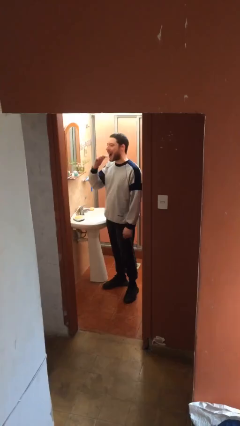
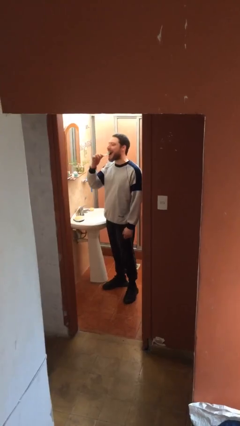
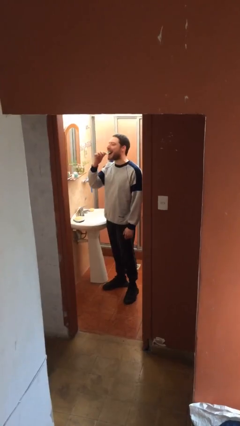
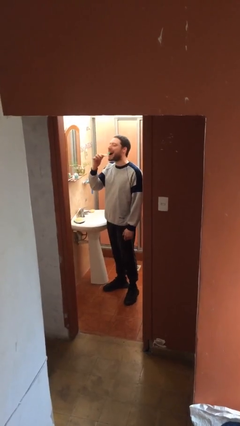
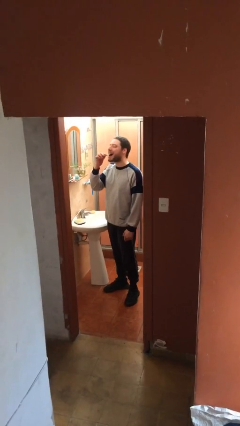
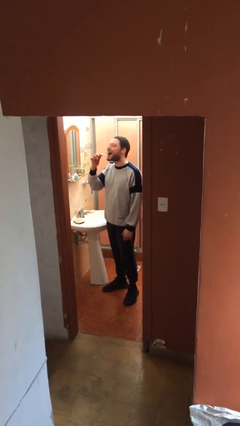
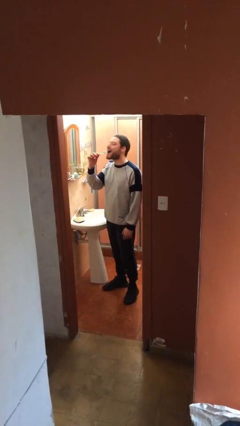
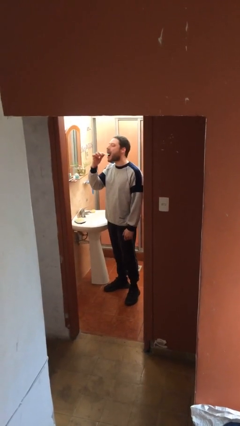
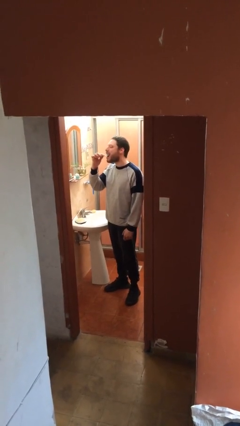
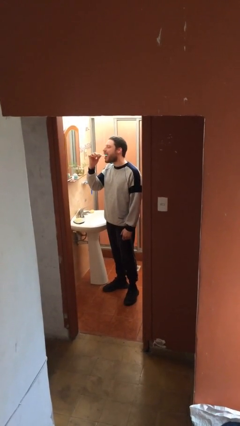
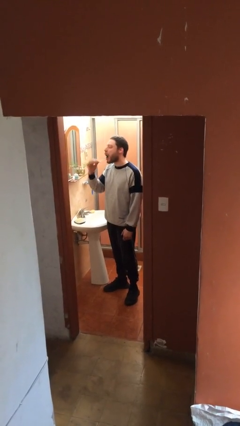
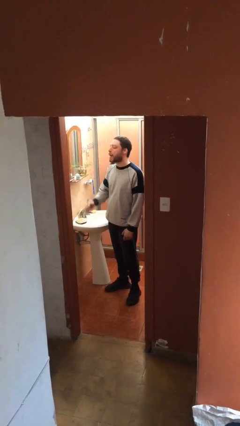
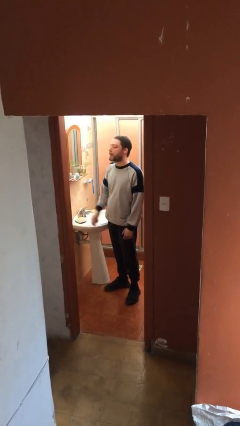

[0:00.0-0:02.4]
person brushes teeth

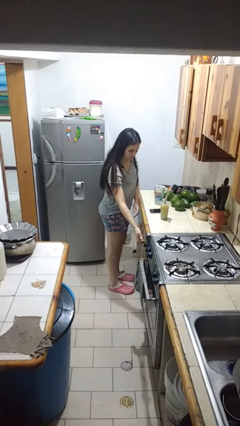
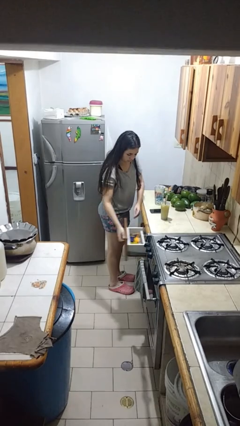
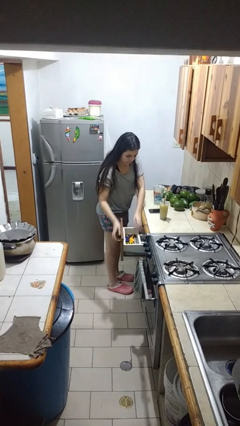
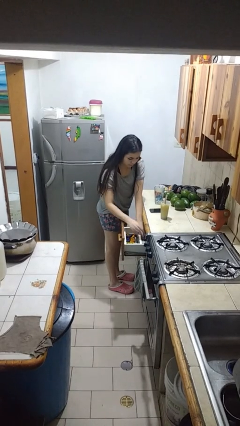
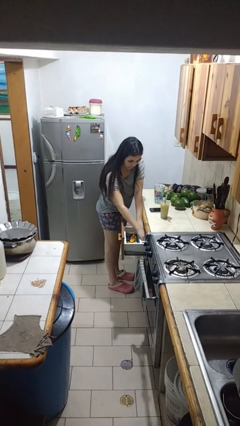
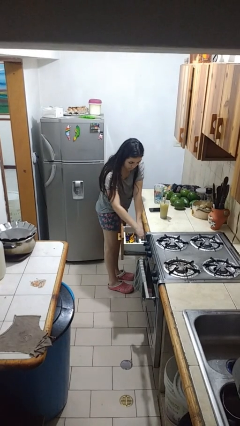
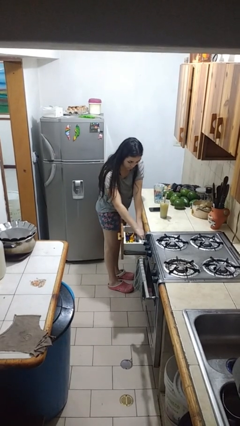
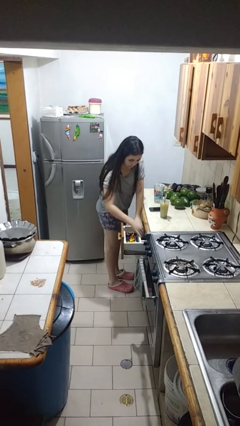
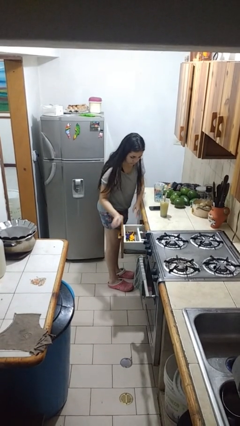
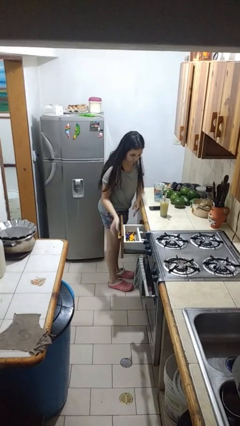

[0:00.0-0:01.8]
person searches in kitchen drawer

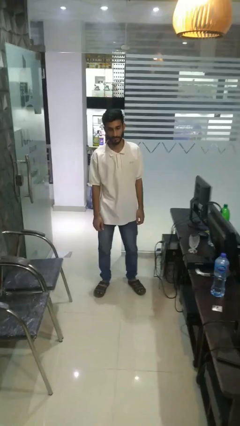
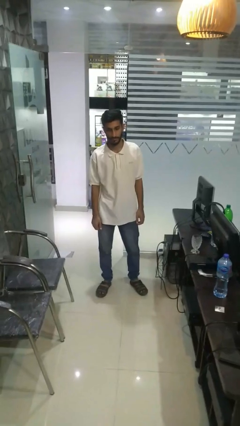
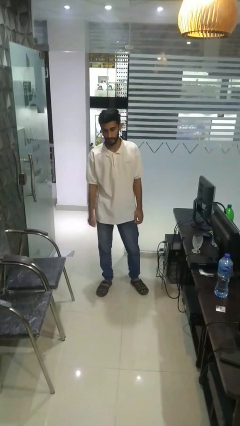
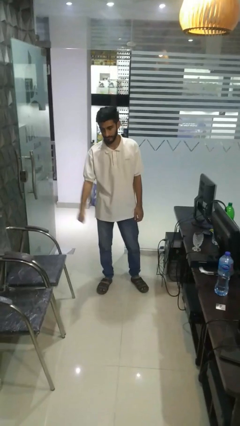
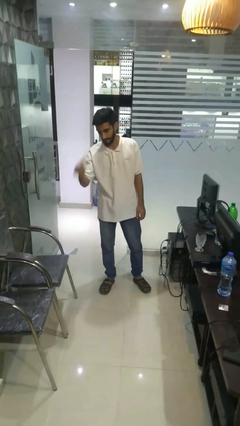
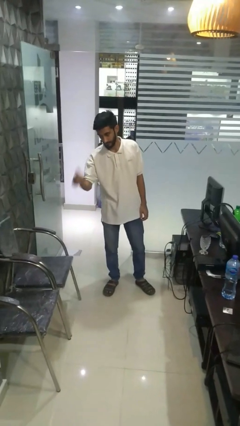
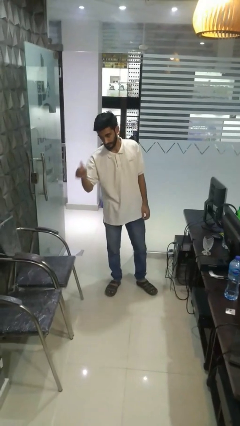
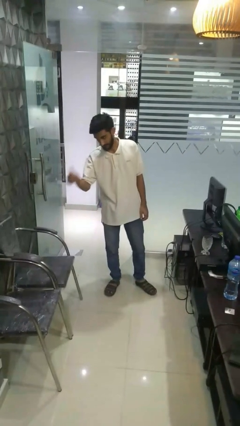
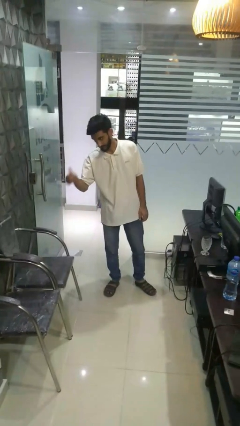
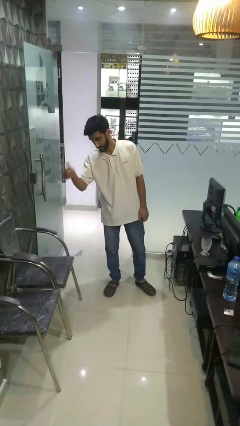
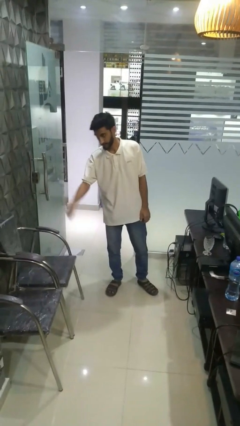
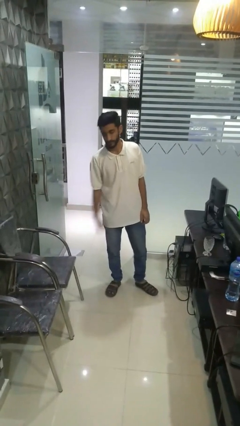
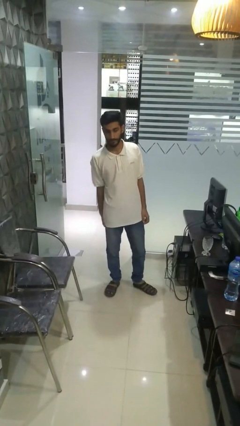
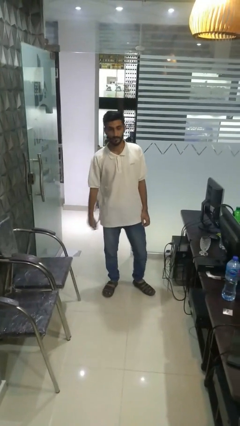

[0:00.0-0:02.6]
person gestures thumbs up

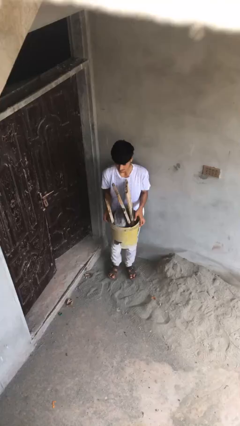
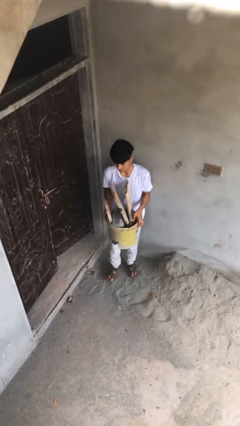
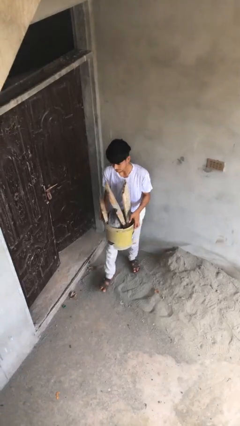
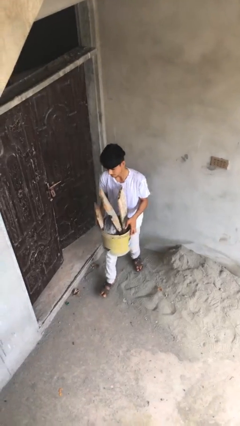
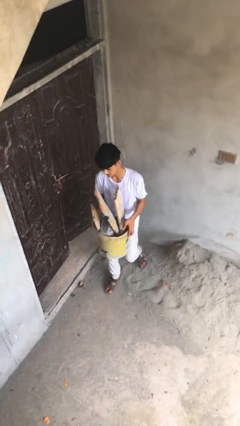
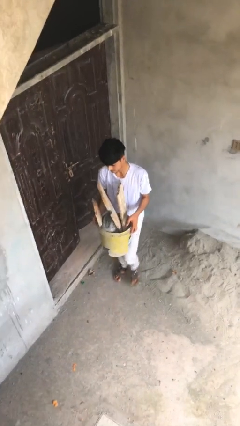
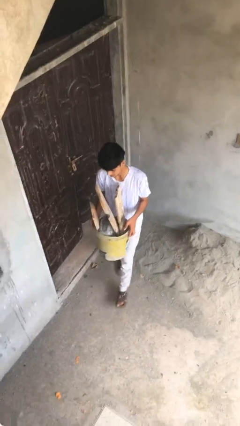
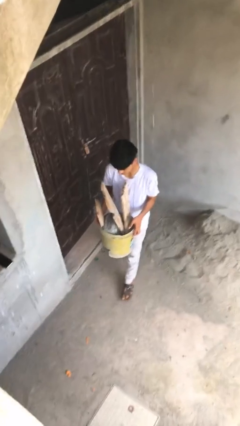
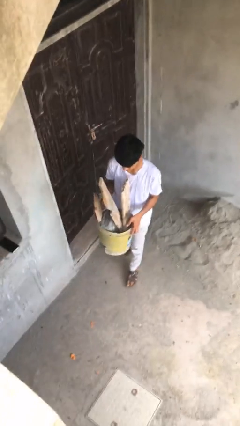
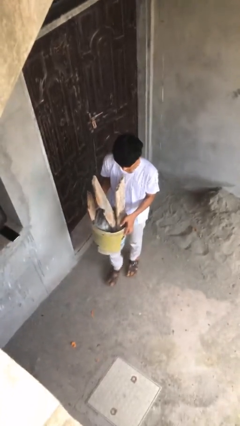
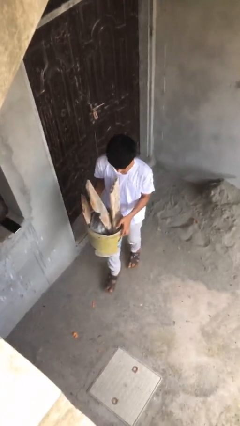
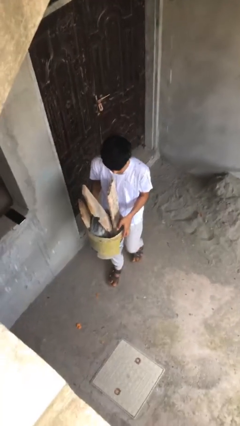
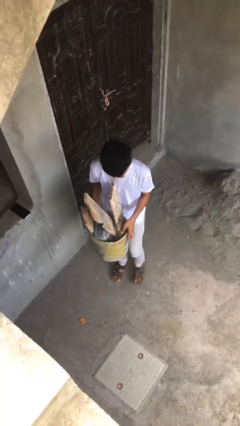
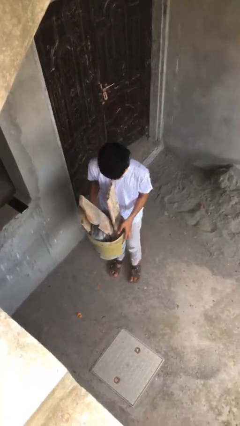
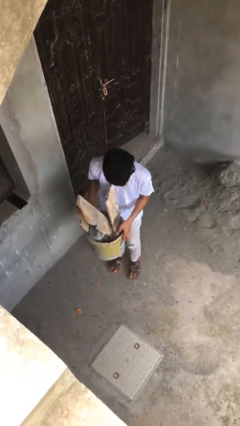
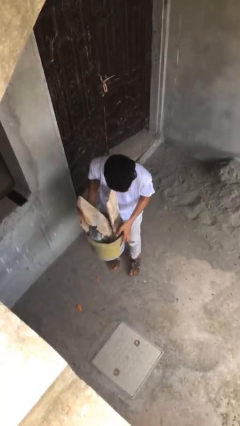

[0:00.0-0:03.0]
person carries heavy object

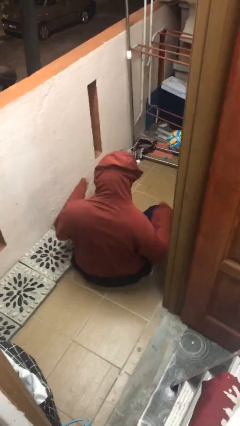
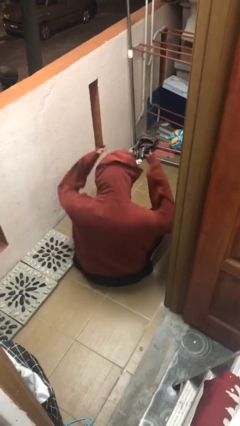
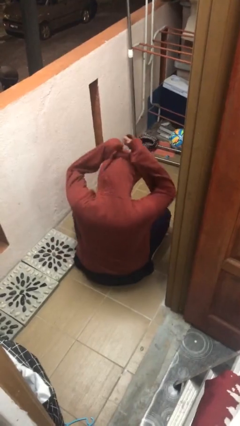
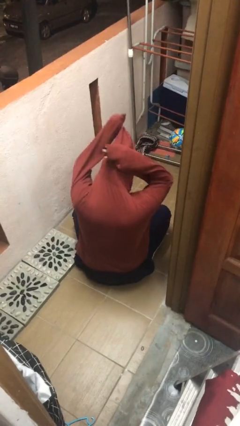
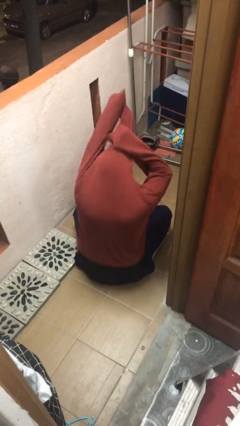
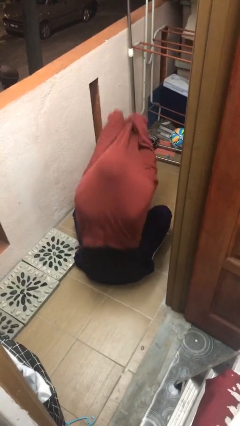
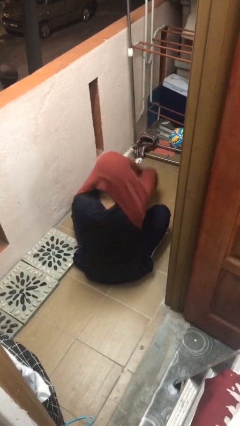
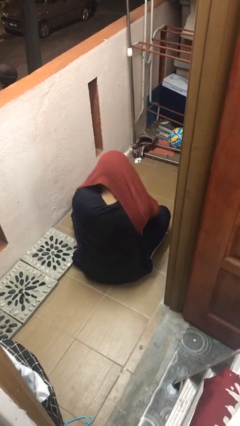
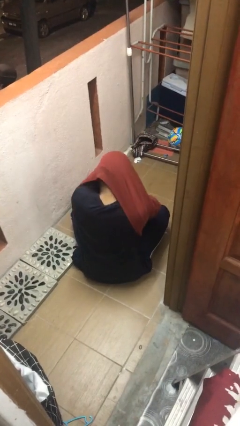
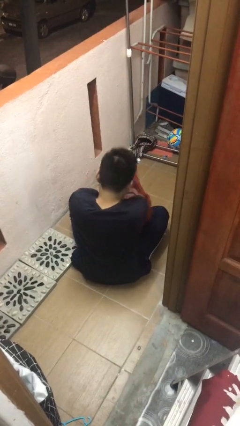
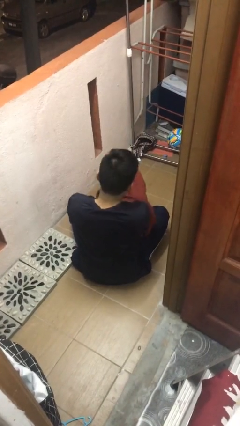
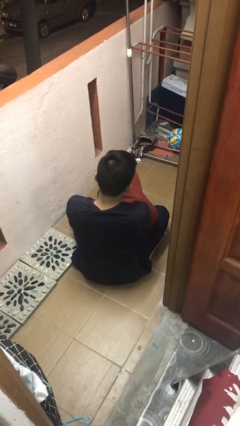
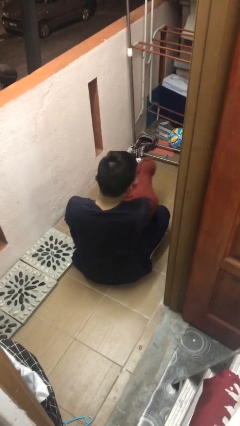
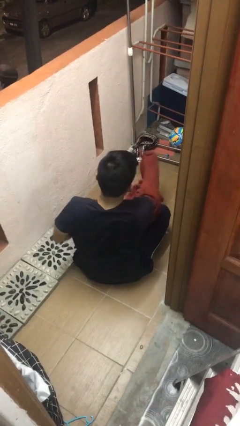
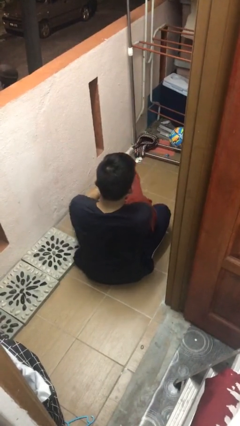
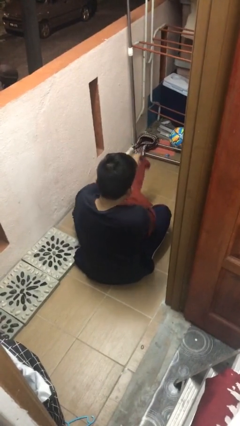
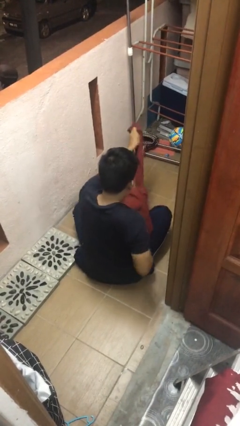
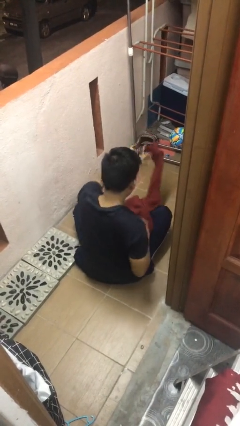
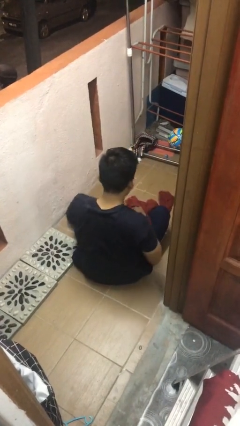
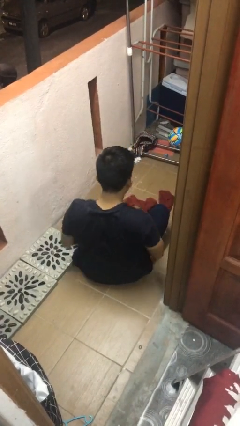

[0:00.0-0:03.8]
person takes off hoodie

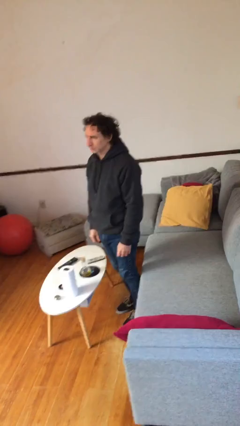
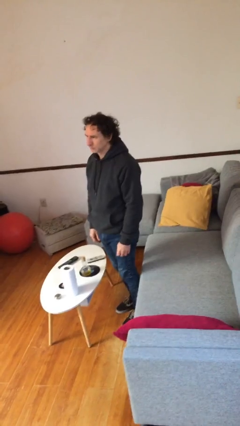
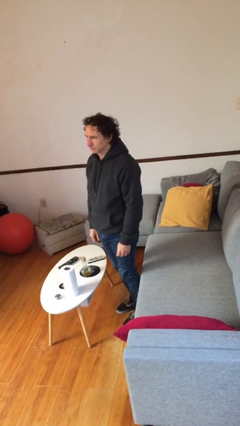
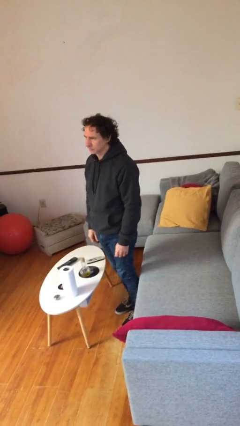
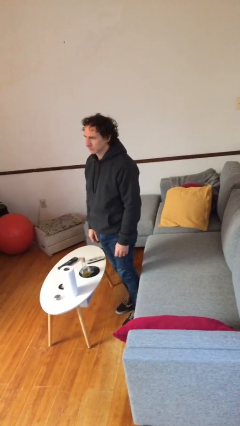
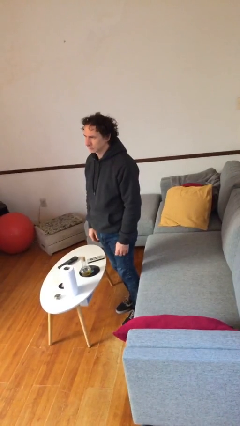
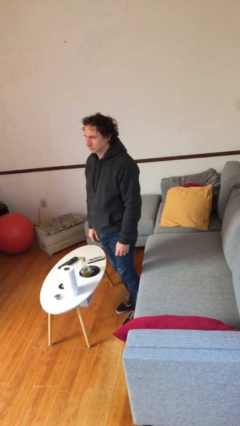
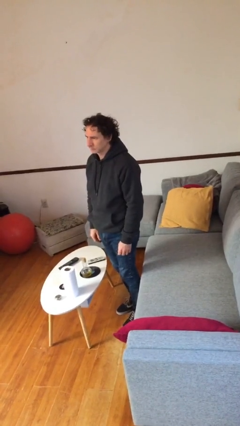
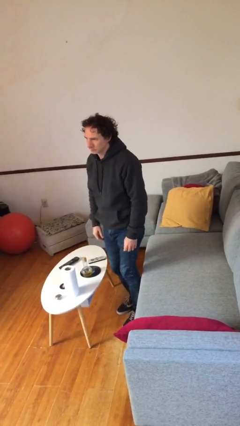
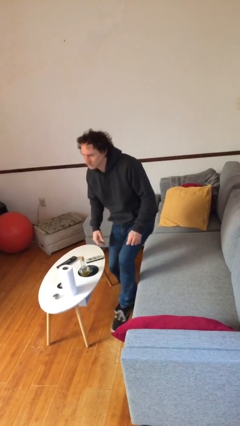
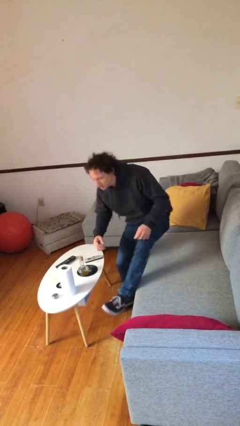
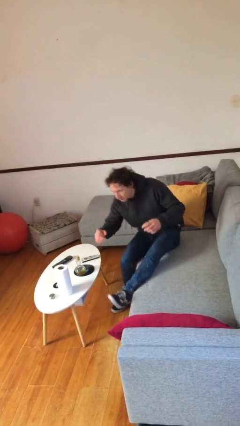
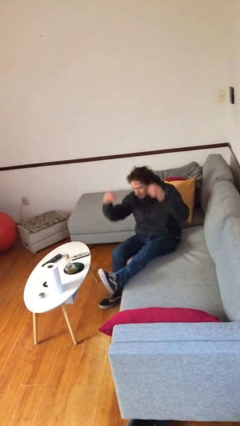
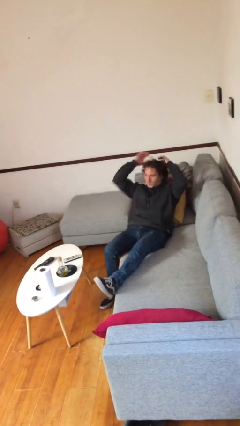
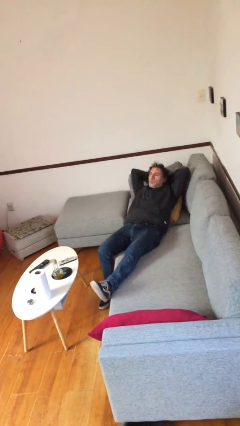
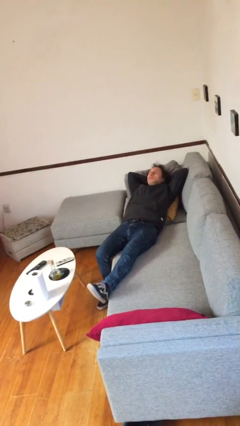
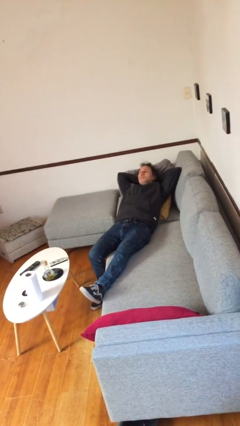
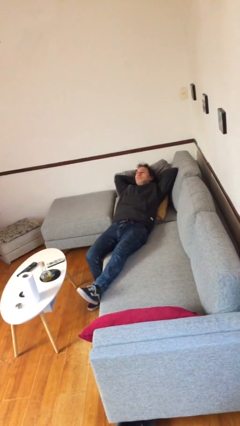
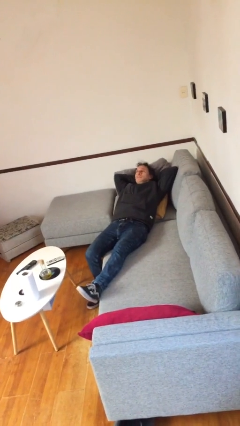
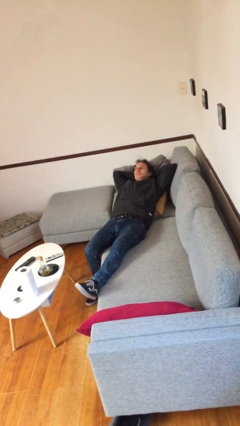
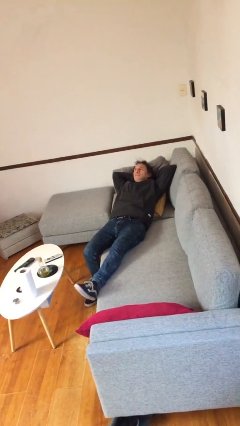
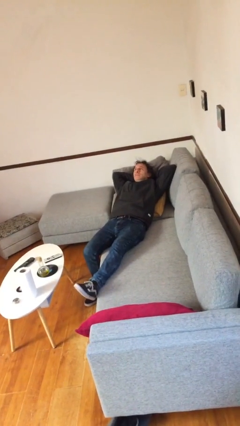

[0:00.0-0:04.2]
person lies down on couch
